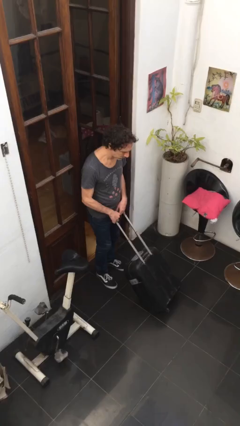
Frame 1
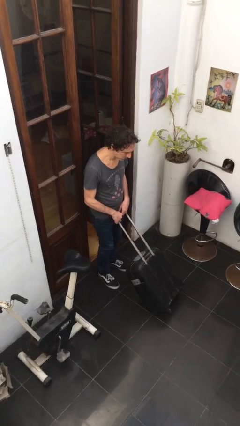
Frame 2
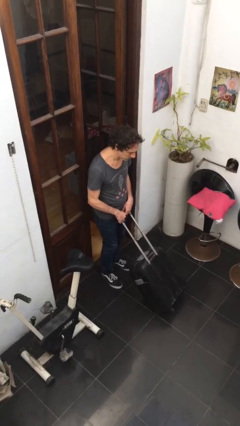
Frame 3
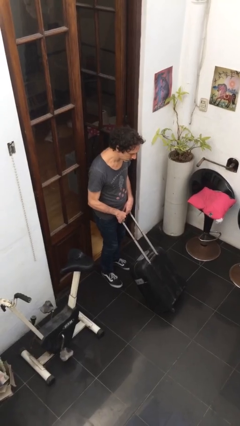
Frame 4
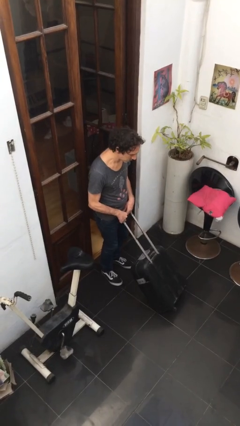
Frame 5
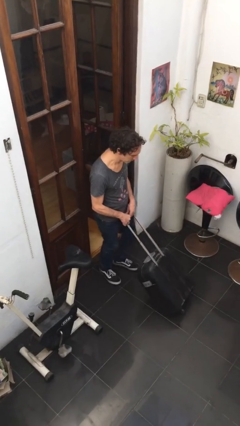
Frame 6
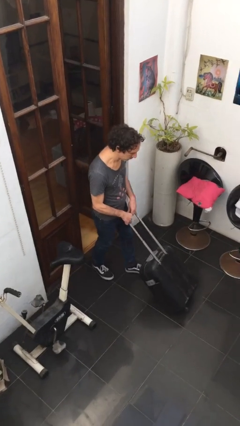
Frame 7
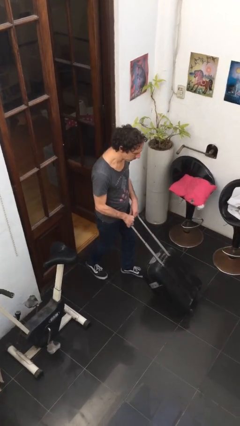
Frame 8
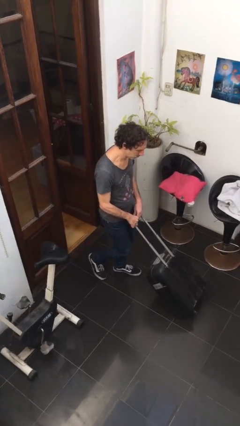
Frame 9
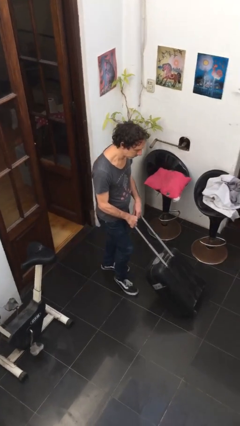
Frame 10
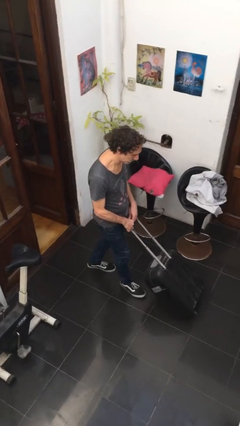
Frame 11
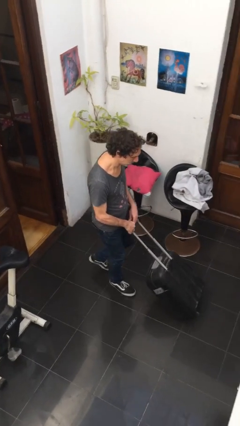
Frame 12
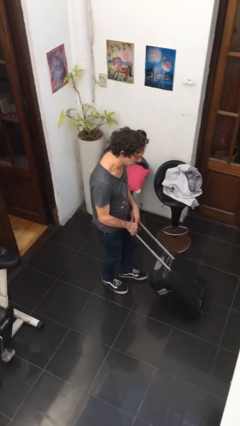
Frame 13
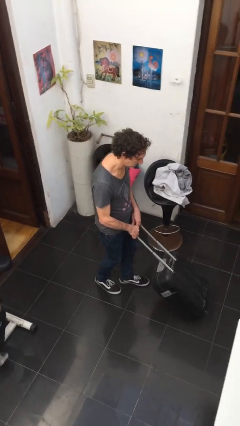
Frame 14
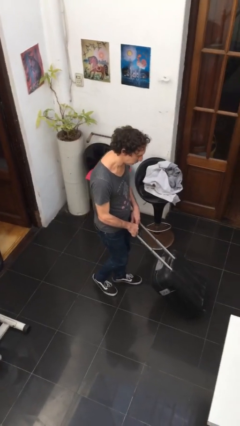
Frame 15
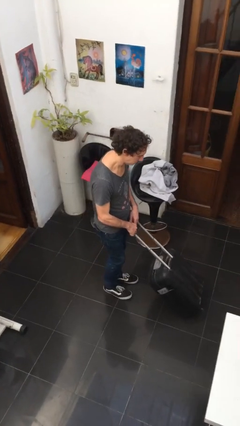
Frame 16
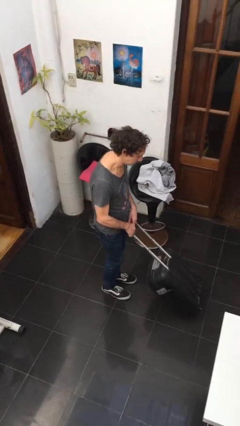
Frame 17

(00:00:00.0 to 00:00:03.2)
person pushes wheeled cart

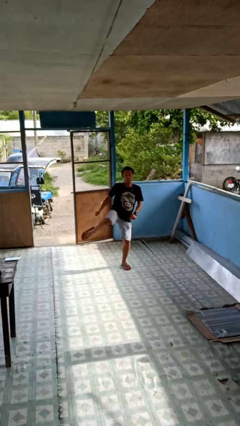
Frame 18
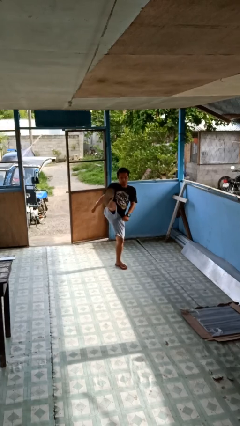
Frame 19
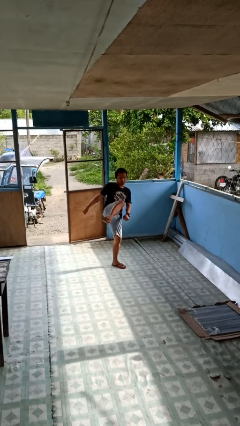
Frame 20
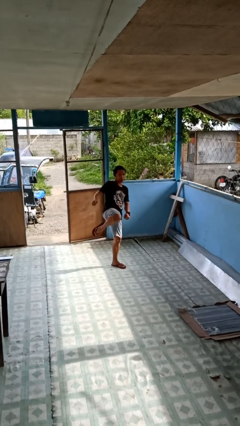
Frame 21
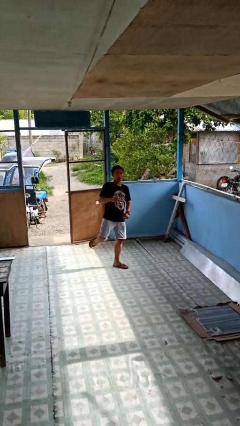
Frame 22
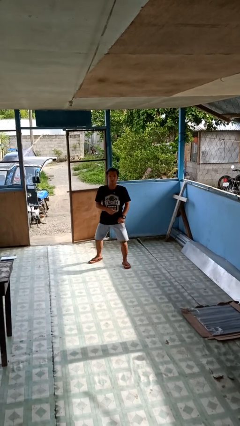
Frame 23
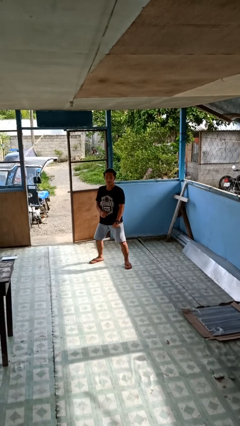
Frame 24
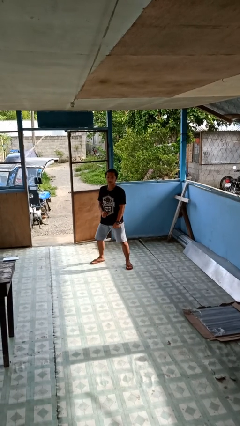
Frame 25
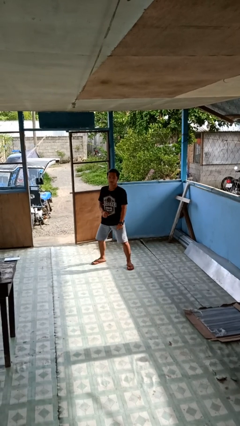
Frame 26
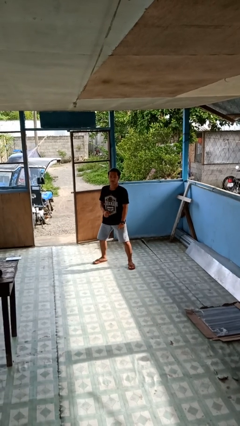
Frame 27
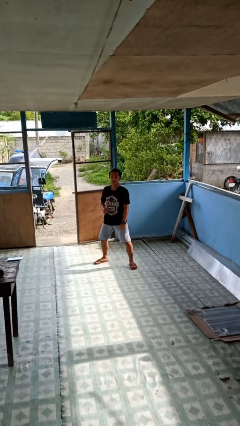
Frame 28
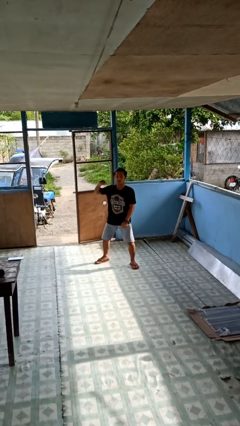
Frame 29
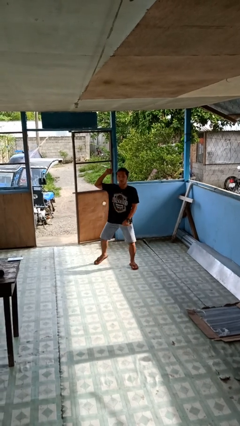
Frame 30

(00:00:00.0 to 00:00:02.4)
person karate kicks

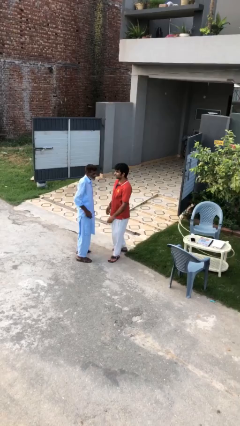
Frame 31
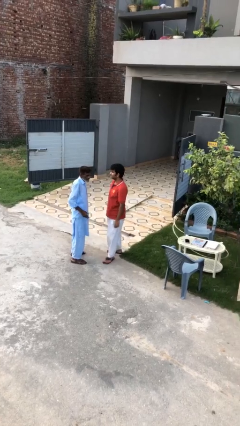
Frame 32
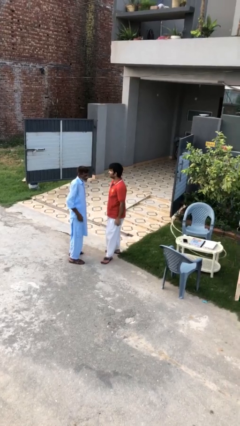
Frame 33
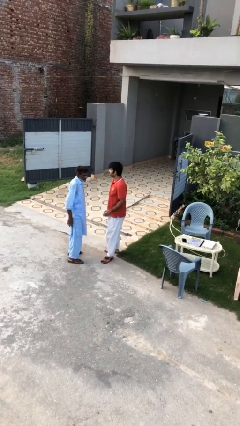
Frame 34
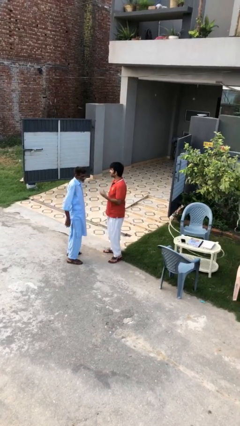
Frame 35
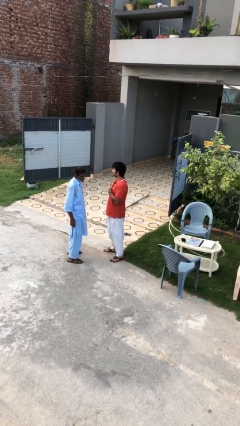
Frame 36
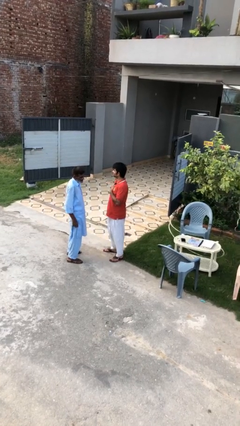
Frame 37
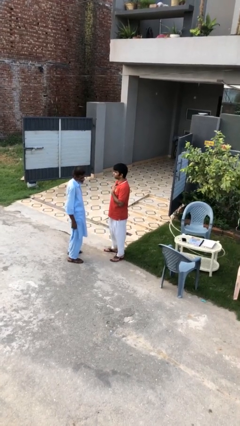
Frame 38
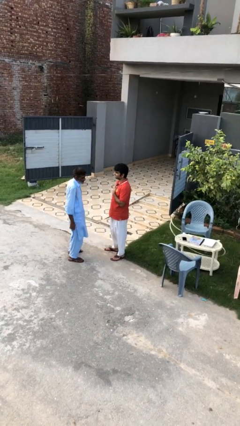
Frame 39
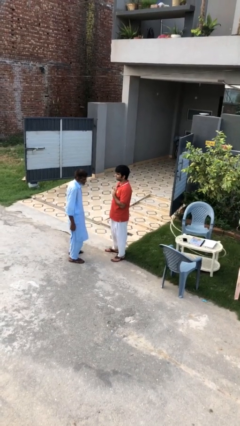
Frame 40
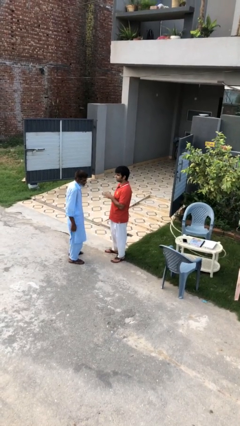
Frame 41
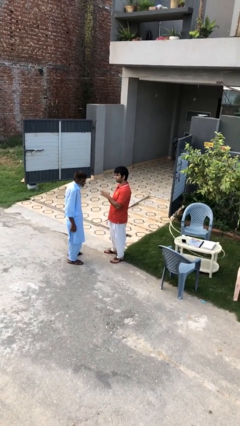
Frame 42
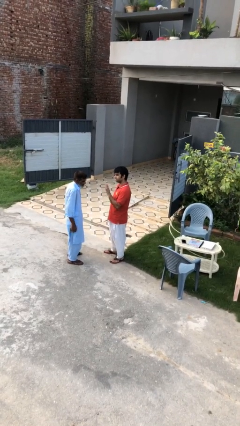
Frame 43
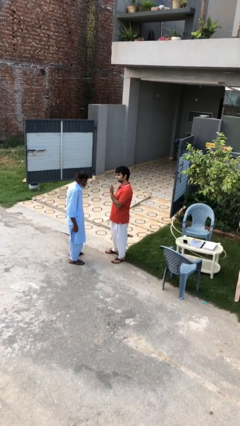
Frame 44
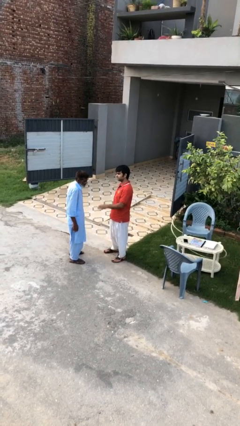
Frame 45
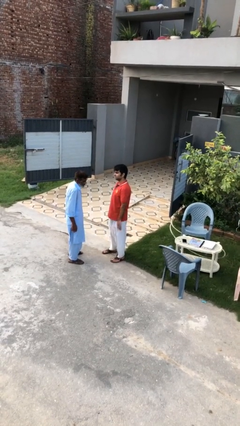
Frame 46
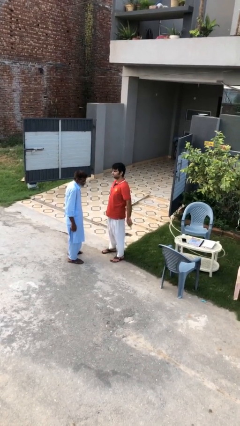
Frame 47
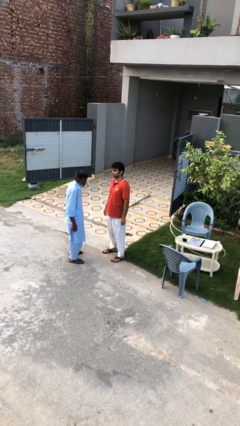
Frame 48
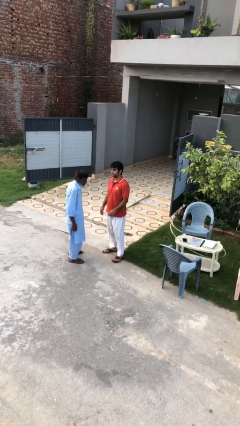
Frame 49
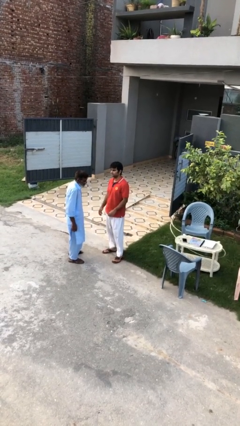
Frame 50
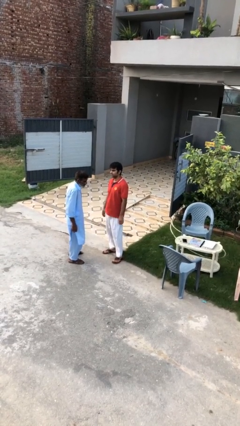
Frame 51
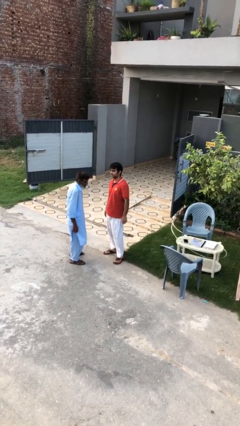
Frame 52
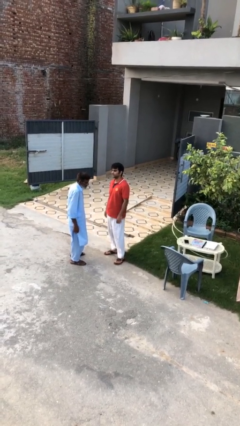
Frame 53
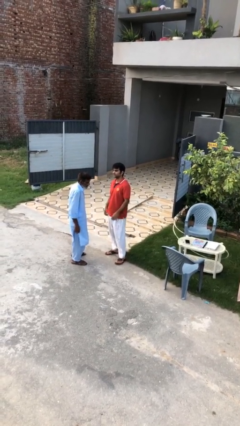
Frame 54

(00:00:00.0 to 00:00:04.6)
person talks to person

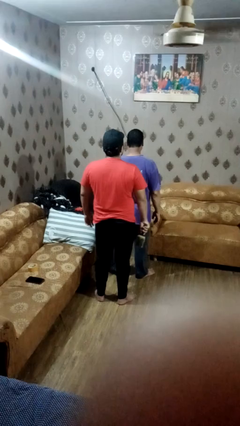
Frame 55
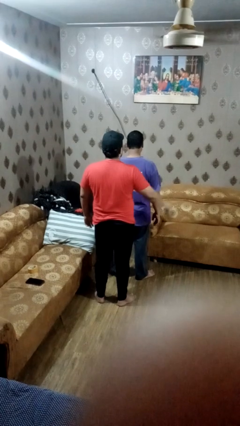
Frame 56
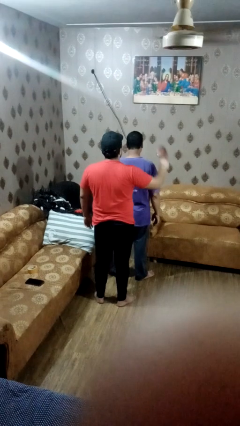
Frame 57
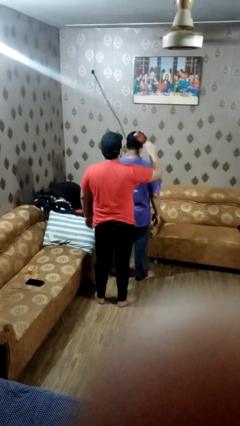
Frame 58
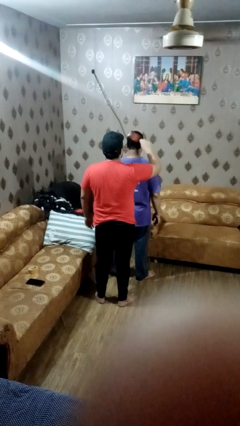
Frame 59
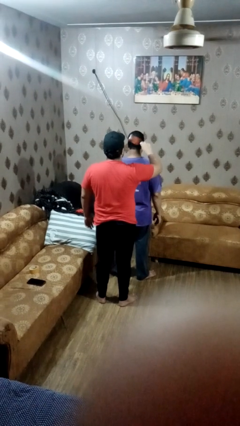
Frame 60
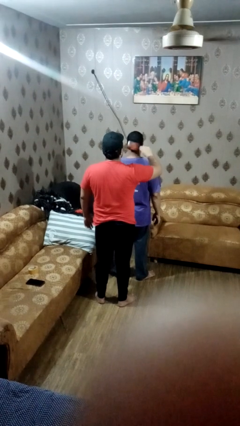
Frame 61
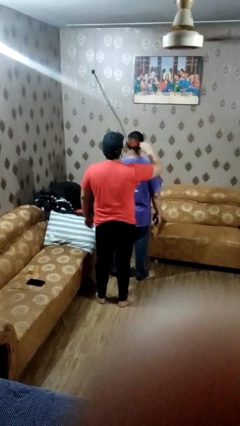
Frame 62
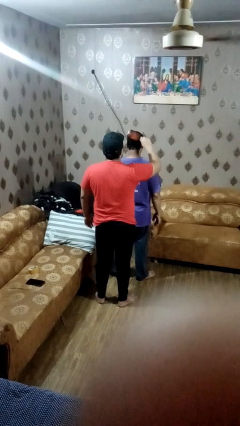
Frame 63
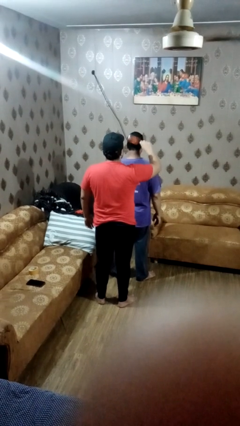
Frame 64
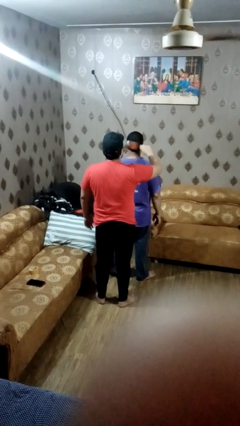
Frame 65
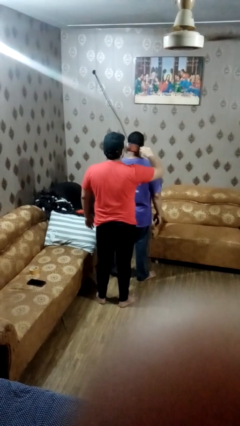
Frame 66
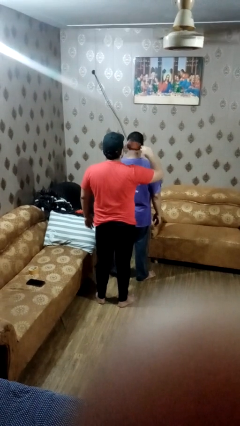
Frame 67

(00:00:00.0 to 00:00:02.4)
person brushes hair of person

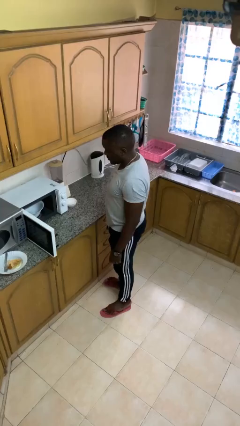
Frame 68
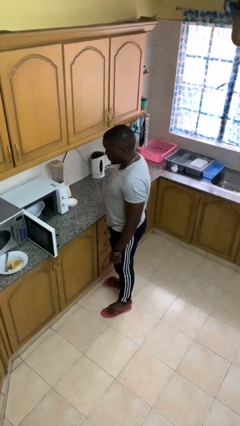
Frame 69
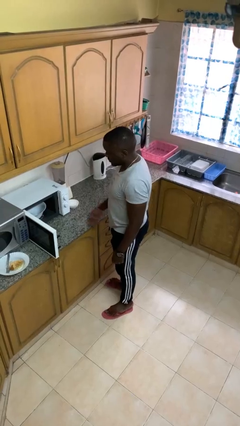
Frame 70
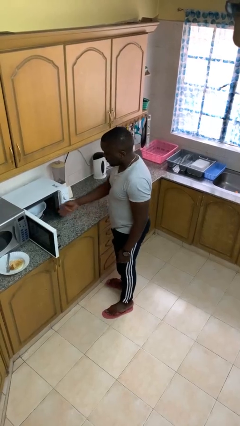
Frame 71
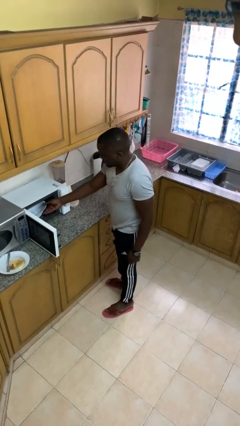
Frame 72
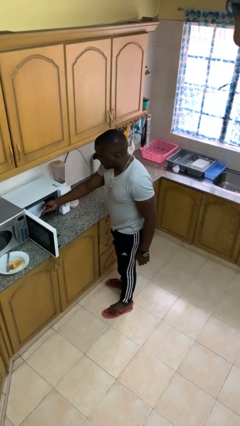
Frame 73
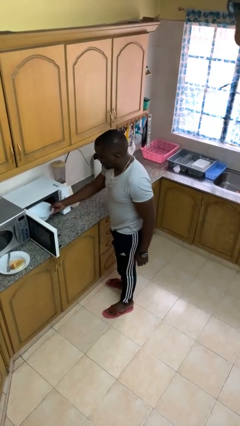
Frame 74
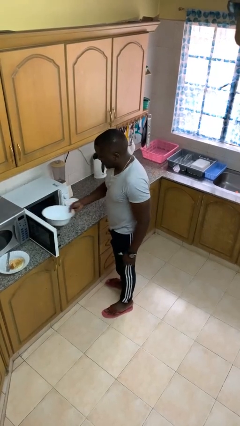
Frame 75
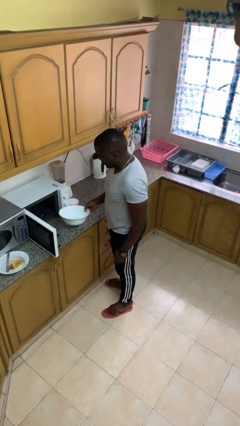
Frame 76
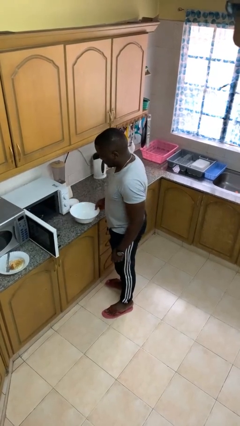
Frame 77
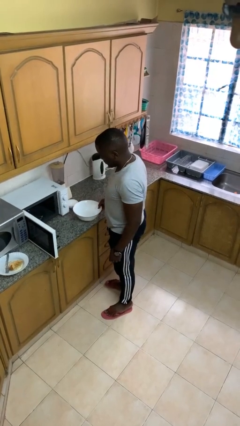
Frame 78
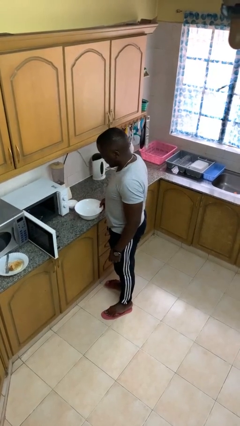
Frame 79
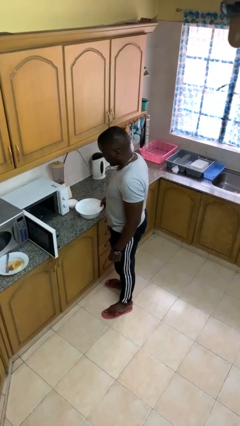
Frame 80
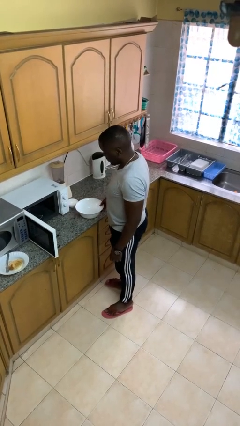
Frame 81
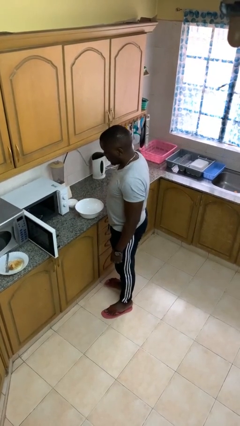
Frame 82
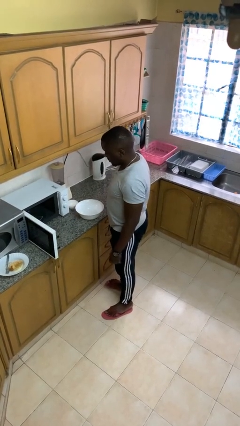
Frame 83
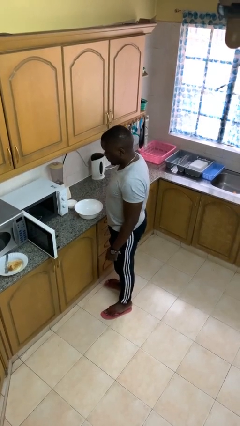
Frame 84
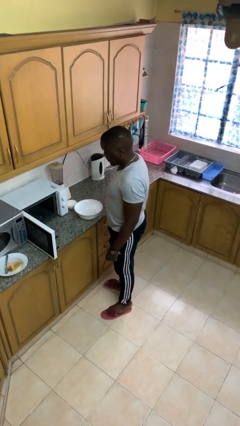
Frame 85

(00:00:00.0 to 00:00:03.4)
person takes object from microwave

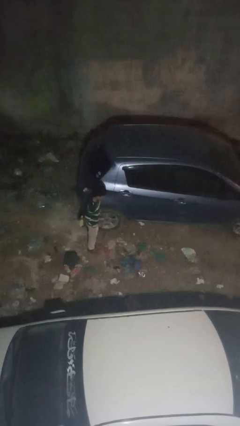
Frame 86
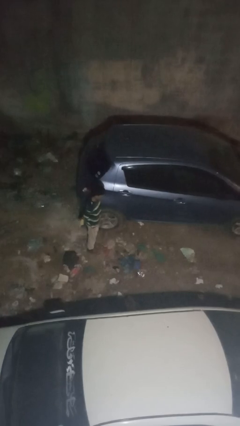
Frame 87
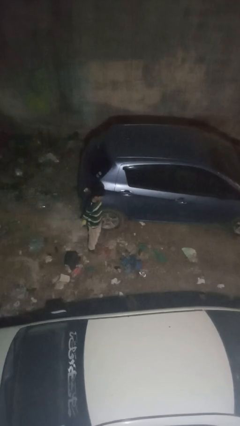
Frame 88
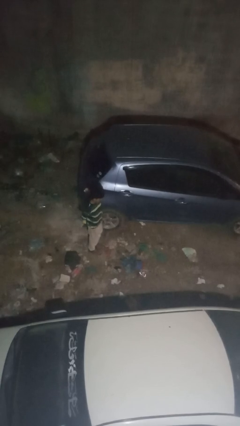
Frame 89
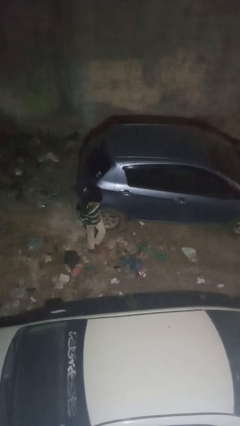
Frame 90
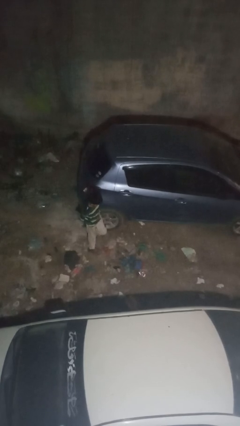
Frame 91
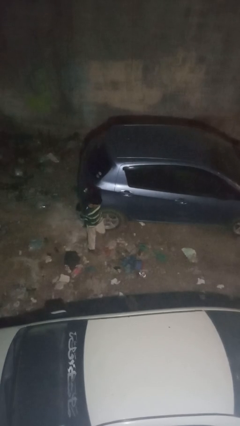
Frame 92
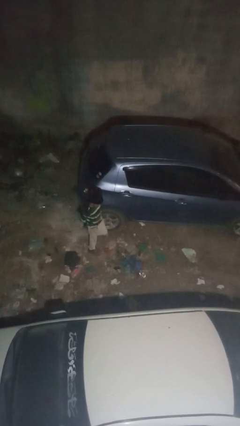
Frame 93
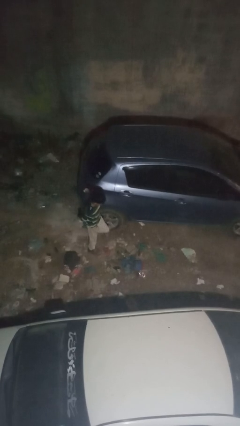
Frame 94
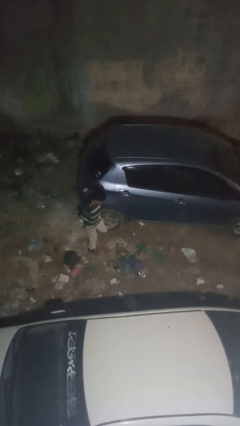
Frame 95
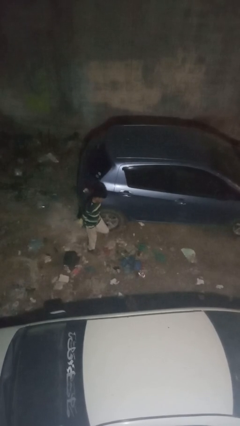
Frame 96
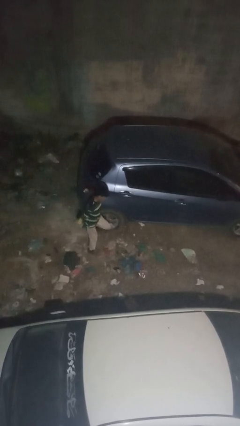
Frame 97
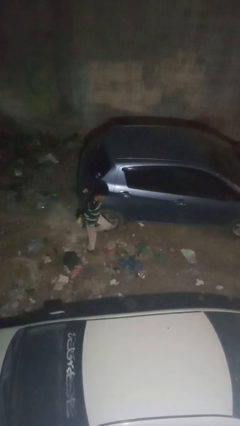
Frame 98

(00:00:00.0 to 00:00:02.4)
person kicks car tires
